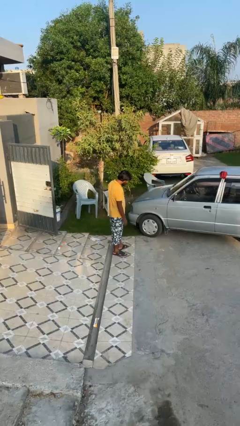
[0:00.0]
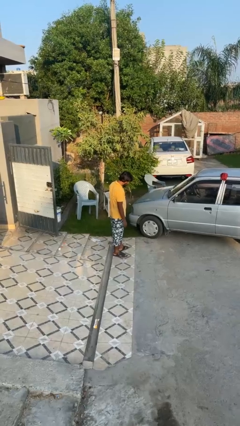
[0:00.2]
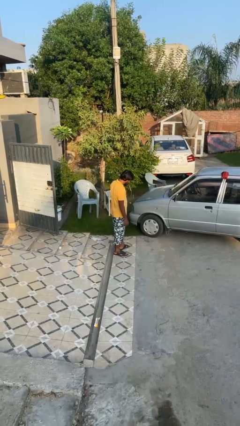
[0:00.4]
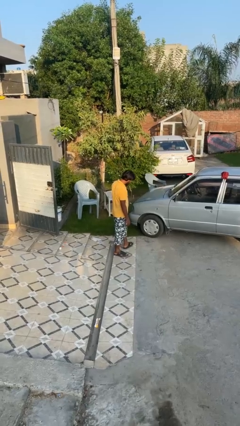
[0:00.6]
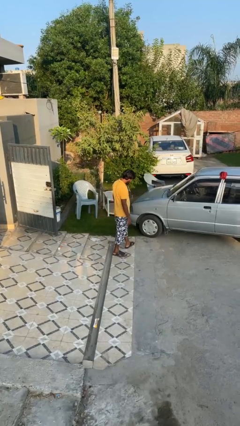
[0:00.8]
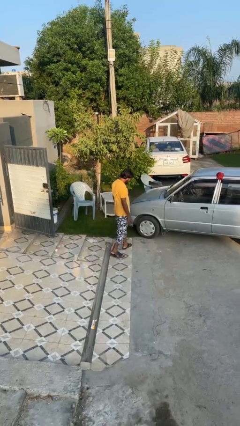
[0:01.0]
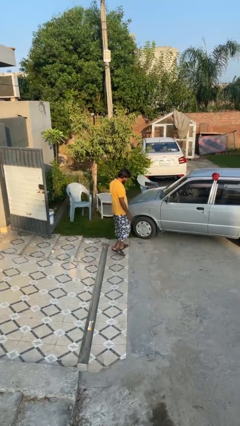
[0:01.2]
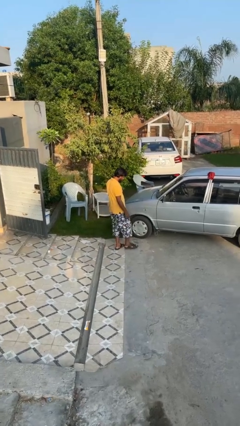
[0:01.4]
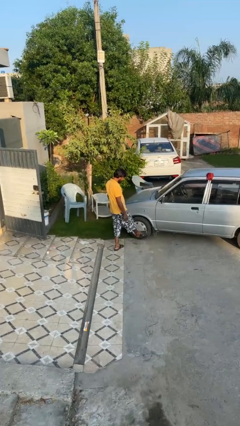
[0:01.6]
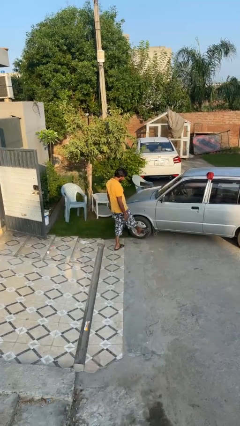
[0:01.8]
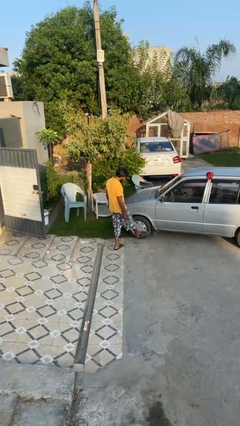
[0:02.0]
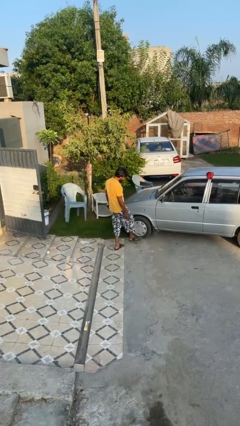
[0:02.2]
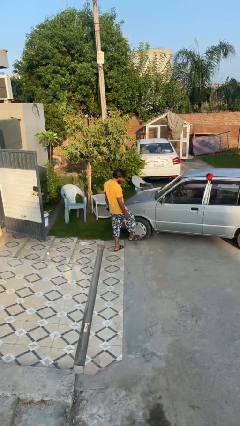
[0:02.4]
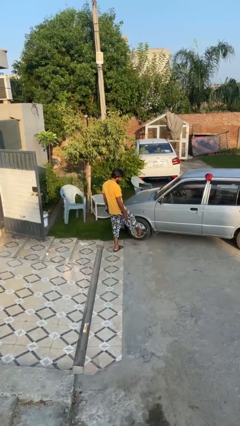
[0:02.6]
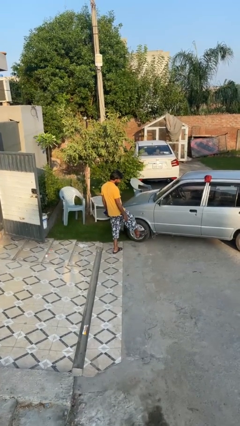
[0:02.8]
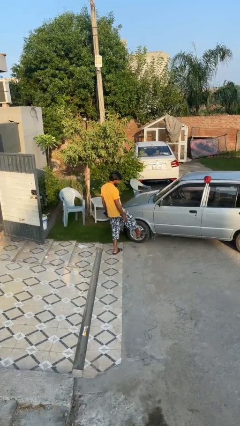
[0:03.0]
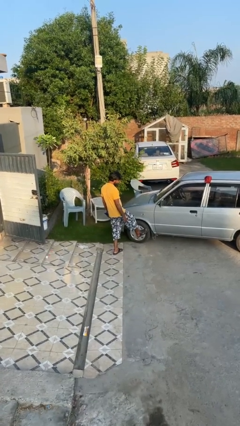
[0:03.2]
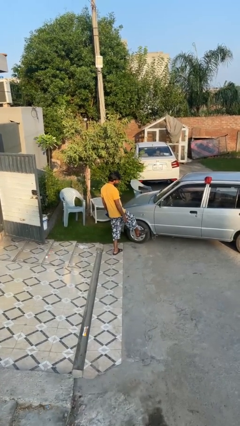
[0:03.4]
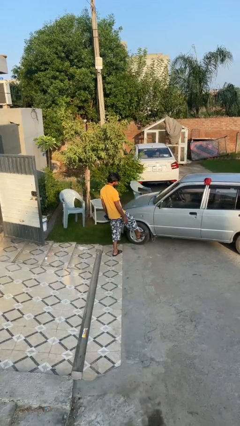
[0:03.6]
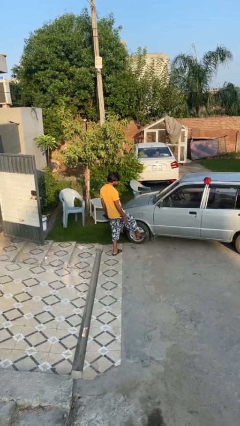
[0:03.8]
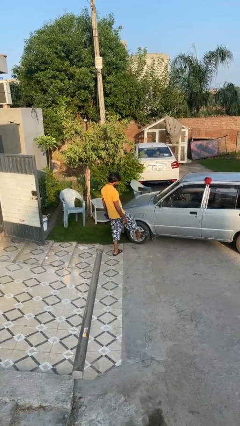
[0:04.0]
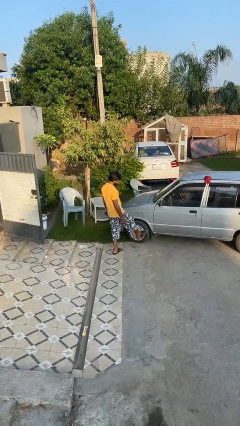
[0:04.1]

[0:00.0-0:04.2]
person kicks car tires

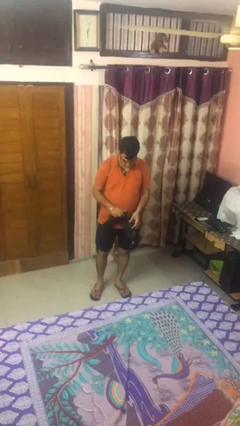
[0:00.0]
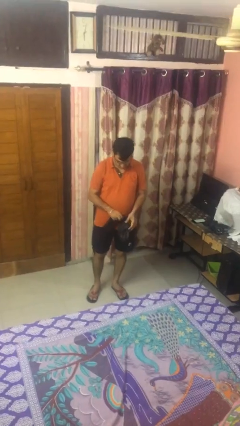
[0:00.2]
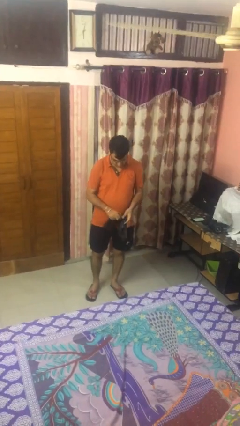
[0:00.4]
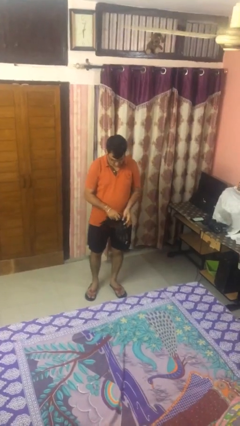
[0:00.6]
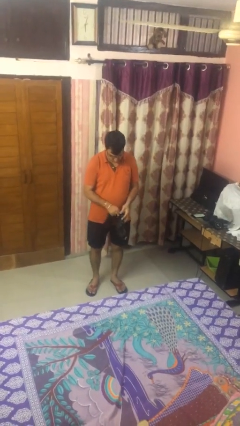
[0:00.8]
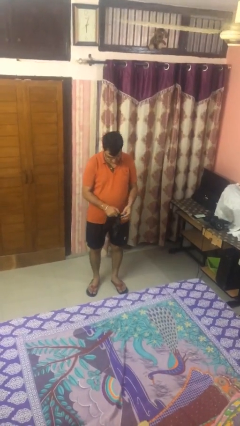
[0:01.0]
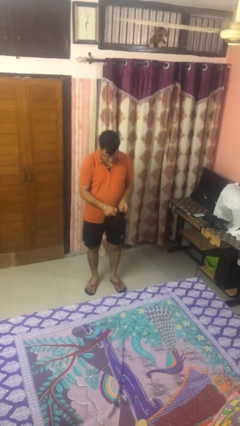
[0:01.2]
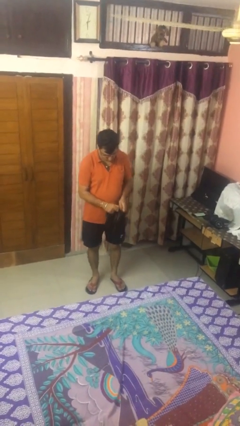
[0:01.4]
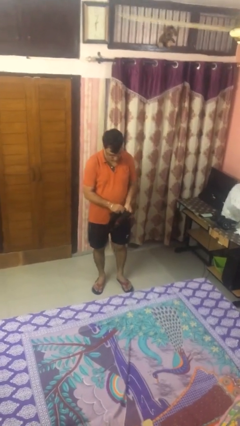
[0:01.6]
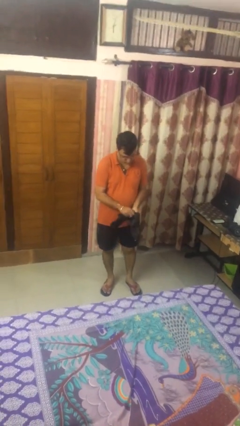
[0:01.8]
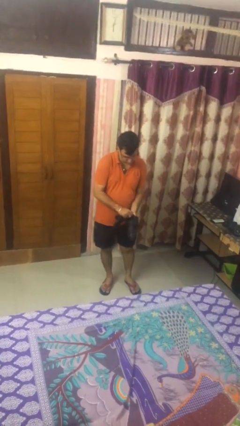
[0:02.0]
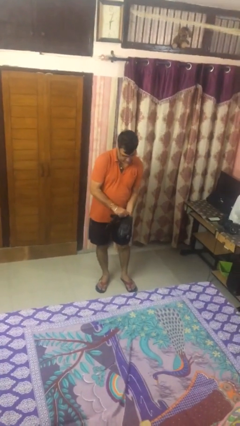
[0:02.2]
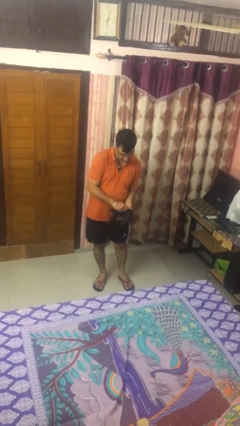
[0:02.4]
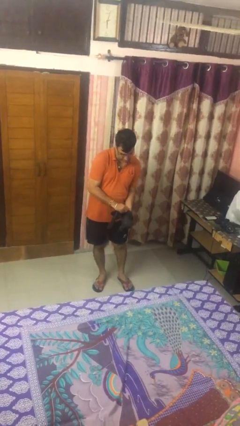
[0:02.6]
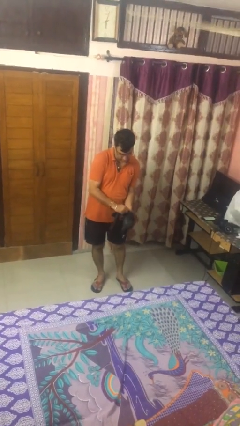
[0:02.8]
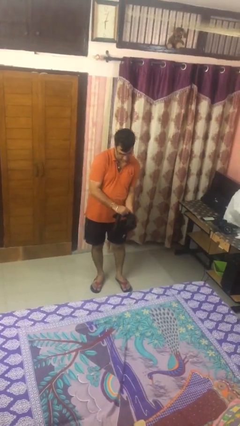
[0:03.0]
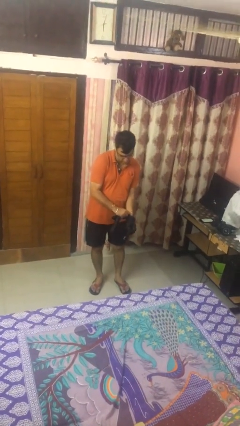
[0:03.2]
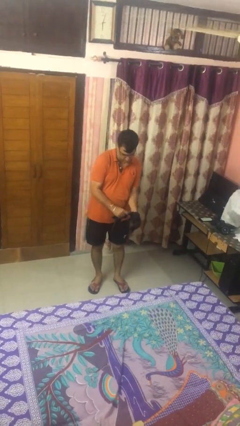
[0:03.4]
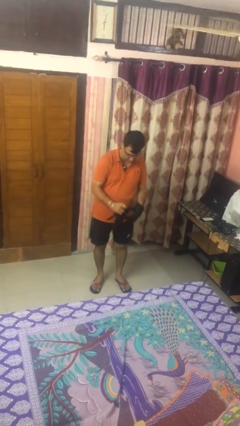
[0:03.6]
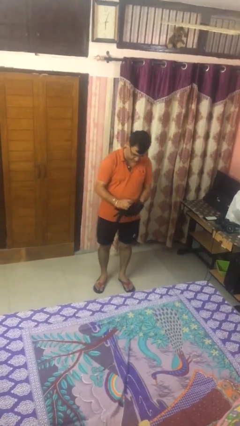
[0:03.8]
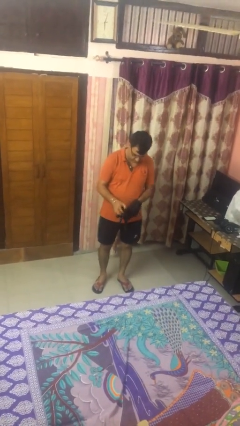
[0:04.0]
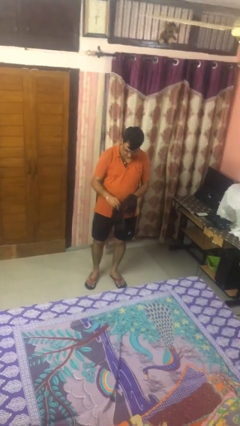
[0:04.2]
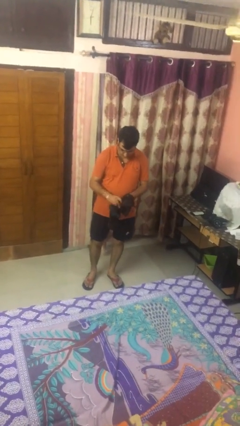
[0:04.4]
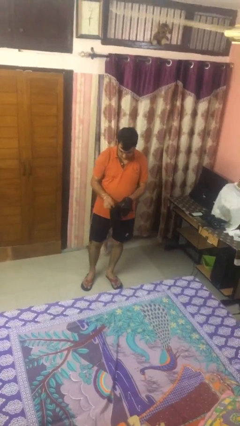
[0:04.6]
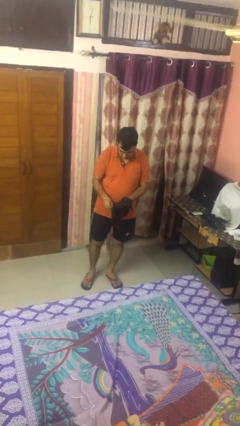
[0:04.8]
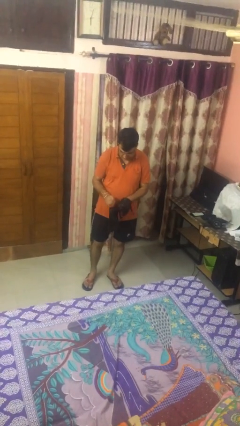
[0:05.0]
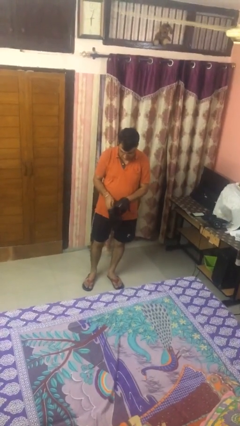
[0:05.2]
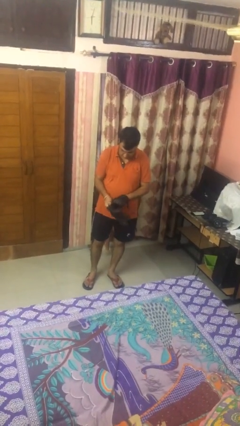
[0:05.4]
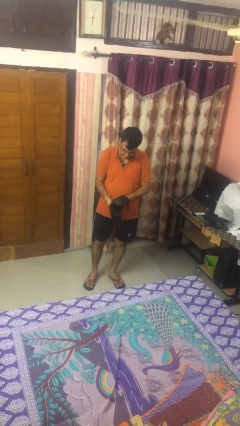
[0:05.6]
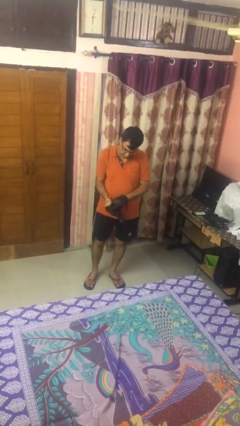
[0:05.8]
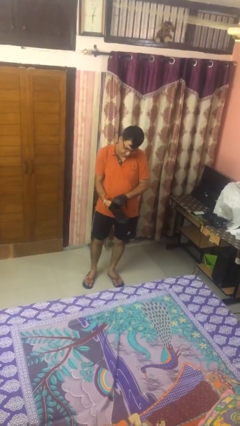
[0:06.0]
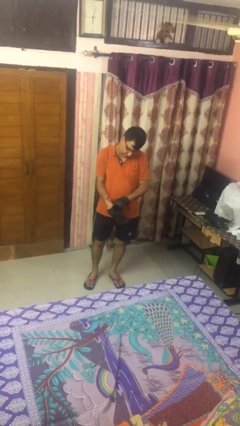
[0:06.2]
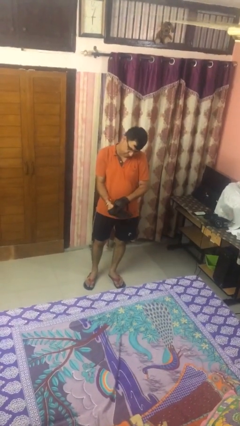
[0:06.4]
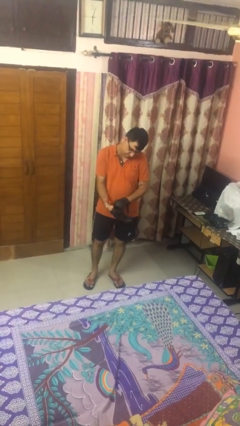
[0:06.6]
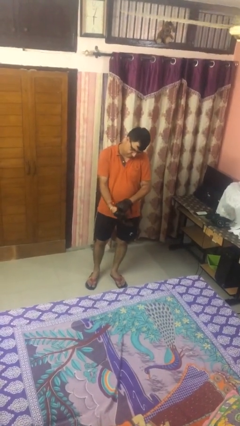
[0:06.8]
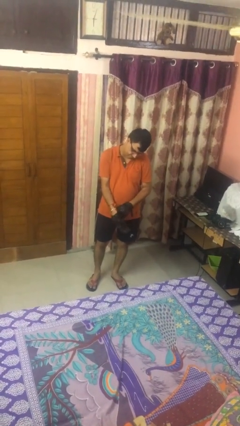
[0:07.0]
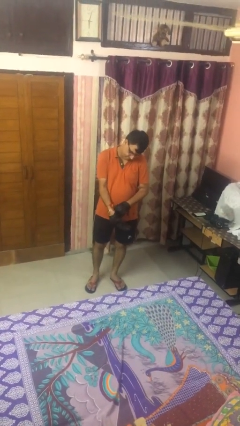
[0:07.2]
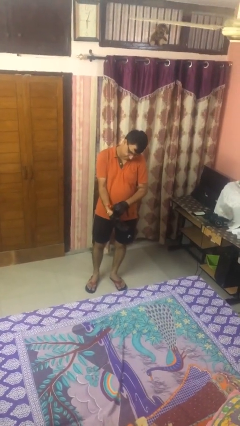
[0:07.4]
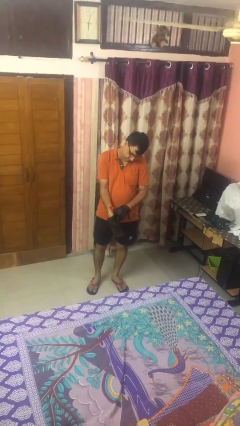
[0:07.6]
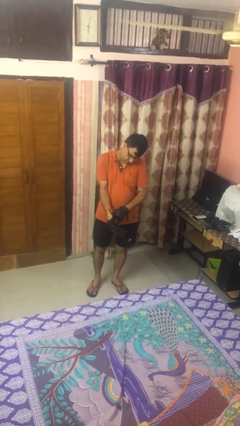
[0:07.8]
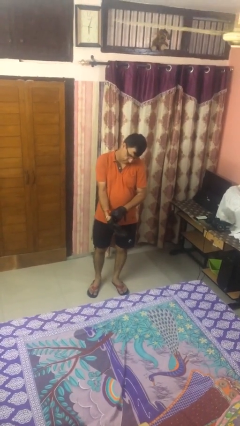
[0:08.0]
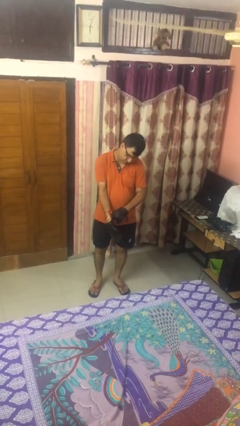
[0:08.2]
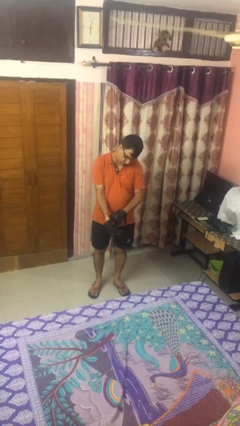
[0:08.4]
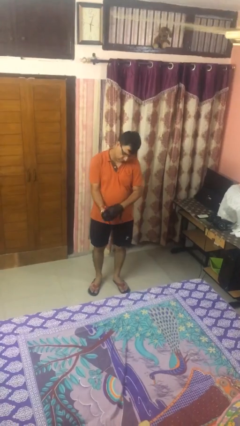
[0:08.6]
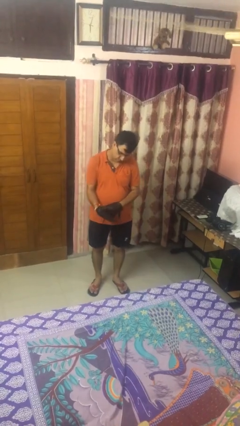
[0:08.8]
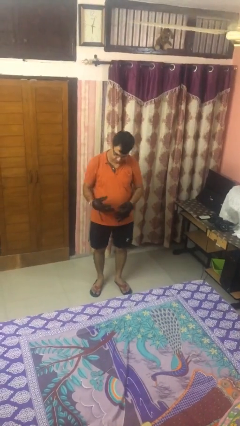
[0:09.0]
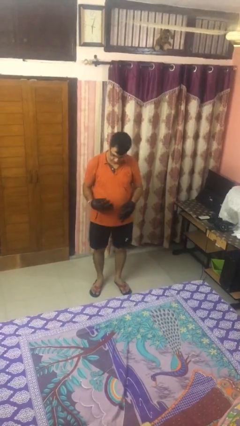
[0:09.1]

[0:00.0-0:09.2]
person puts on gloves

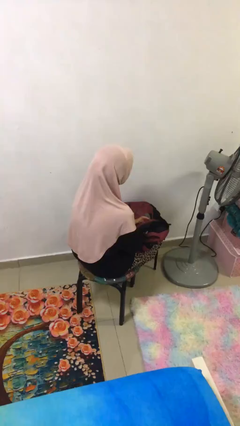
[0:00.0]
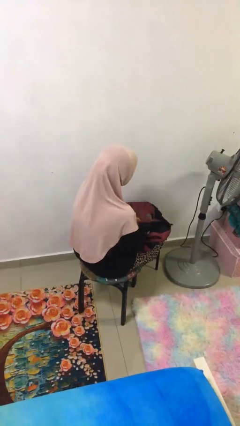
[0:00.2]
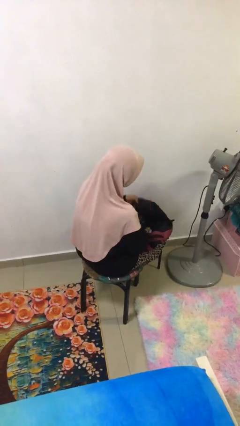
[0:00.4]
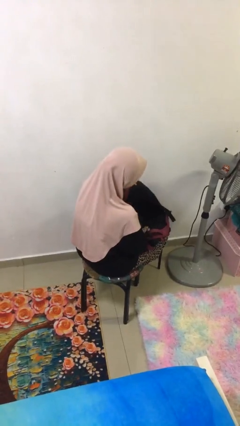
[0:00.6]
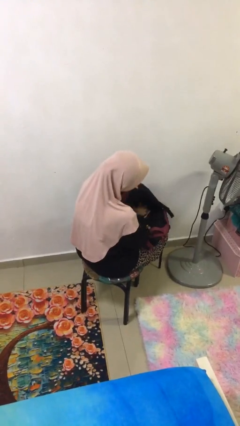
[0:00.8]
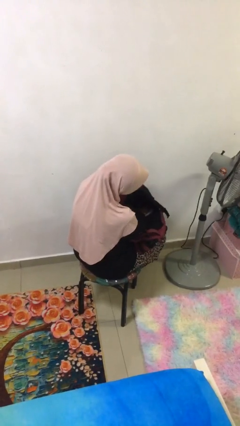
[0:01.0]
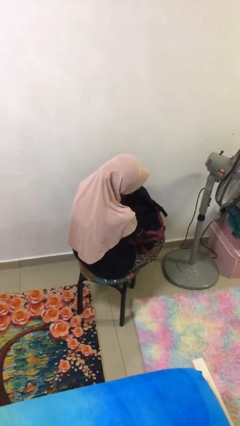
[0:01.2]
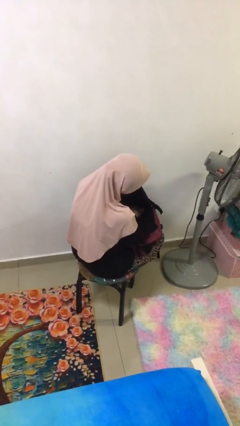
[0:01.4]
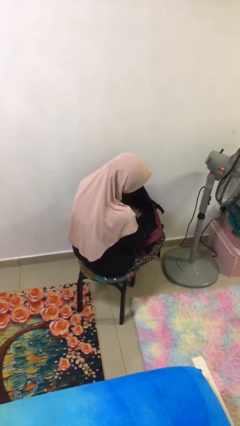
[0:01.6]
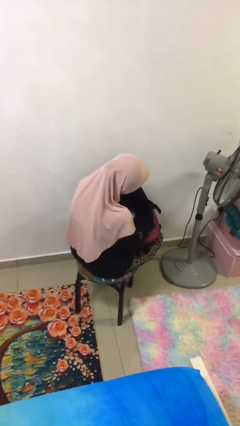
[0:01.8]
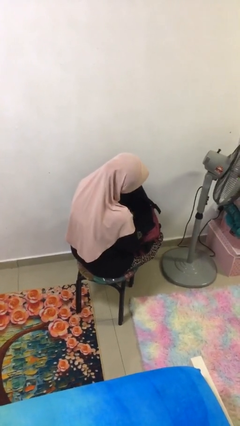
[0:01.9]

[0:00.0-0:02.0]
person searches in backpack

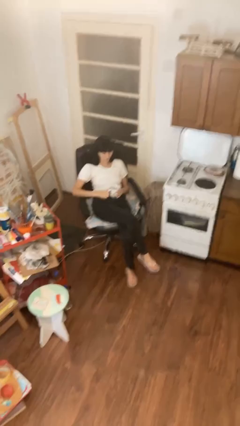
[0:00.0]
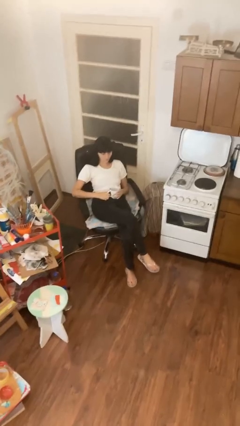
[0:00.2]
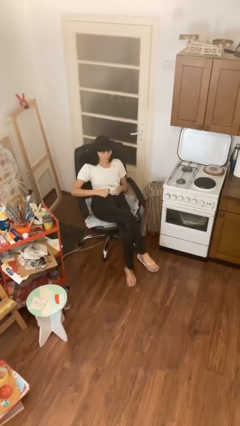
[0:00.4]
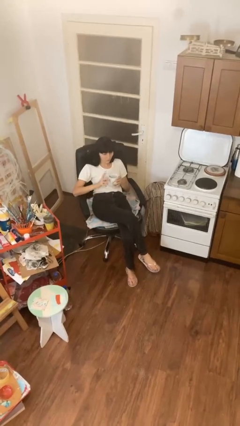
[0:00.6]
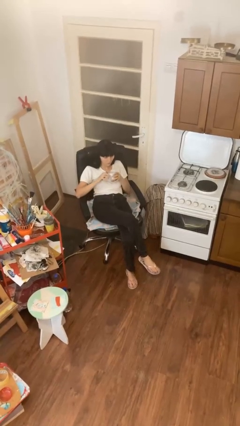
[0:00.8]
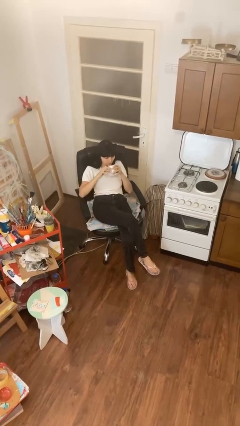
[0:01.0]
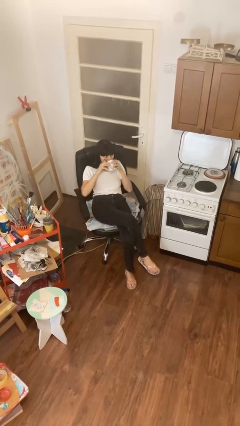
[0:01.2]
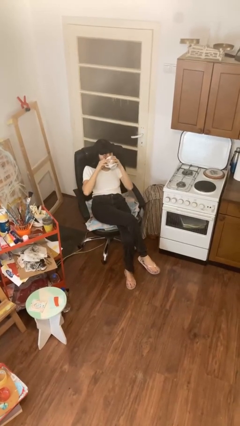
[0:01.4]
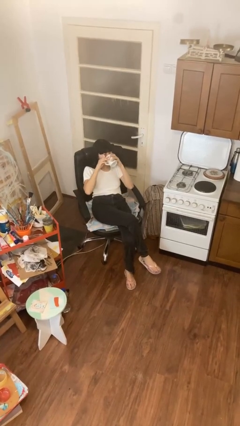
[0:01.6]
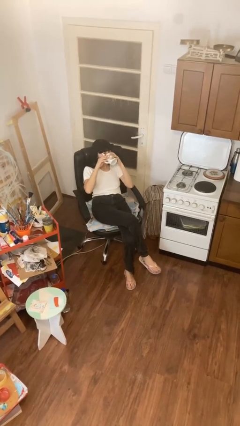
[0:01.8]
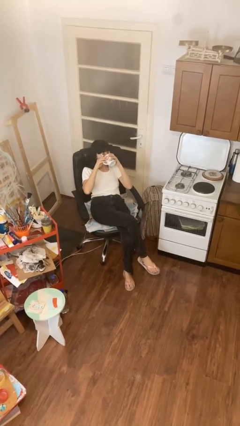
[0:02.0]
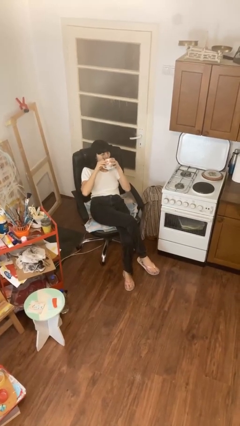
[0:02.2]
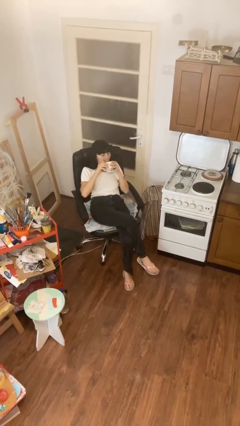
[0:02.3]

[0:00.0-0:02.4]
person drinks from mug
